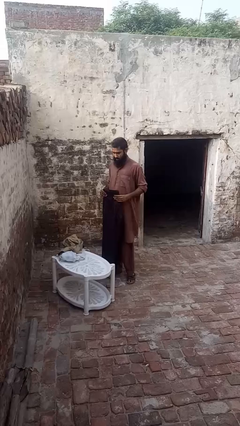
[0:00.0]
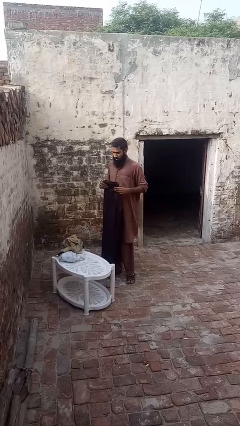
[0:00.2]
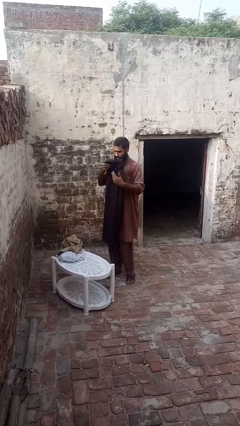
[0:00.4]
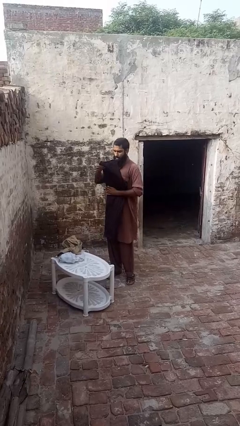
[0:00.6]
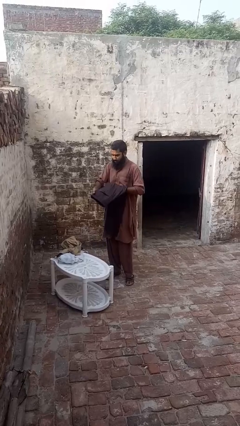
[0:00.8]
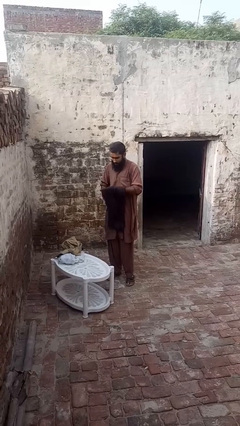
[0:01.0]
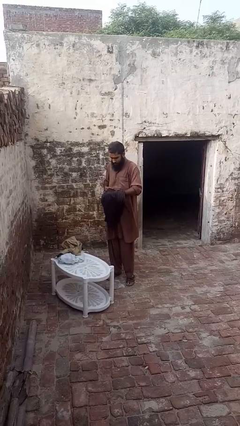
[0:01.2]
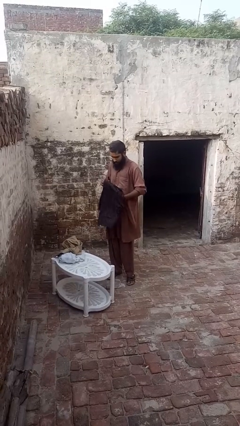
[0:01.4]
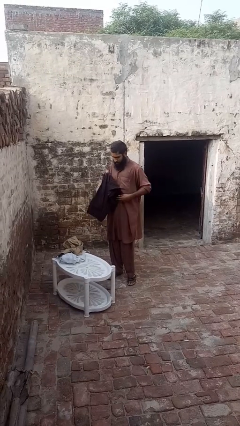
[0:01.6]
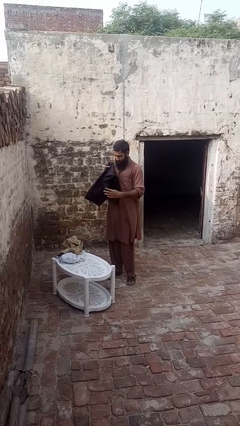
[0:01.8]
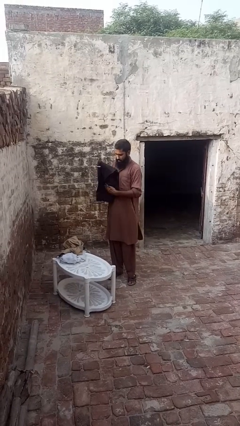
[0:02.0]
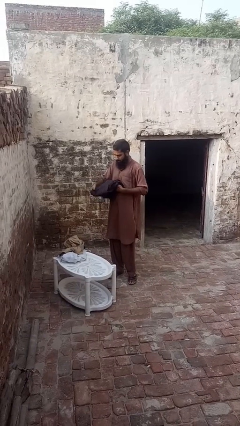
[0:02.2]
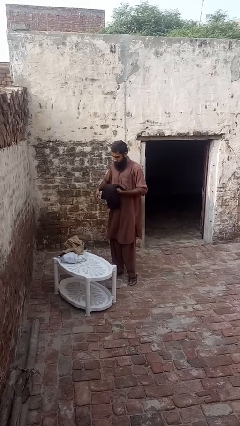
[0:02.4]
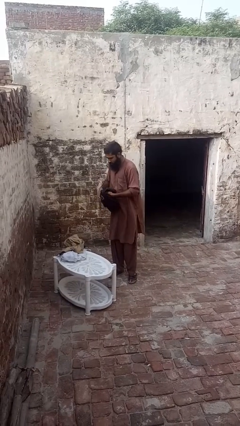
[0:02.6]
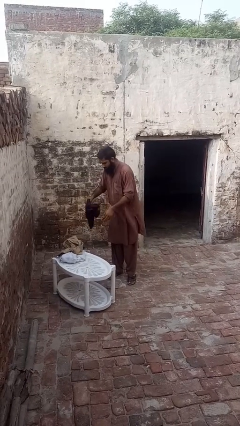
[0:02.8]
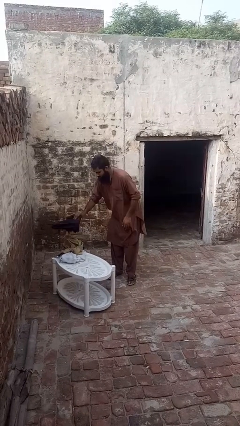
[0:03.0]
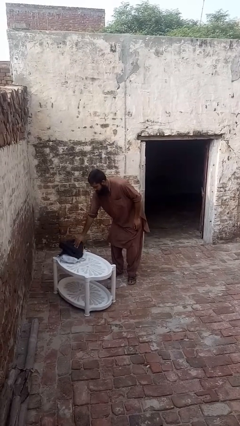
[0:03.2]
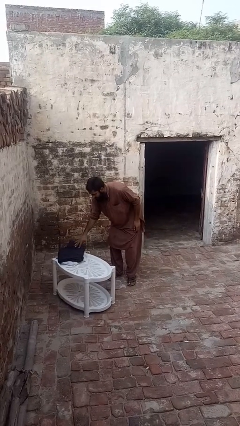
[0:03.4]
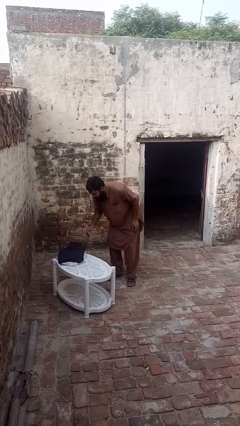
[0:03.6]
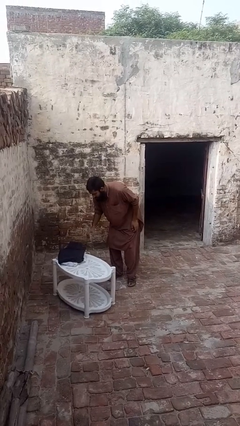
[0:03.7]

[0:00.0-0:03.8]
person folds pants

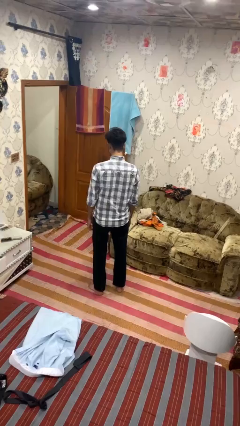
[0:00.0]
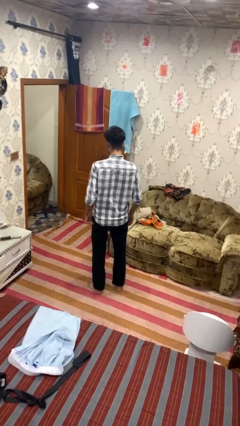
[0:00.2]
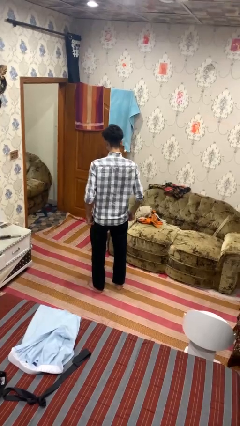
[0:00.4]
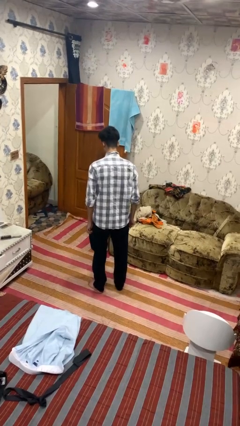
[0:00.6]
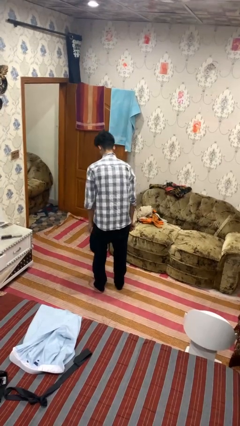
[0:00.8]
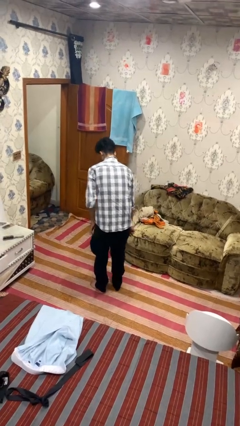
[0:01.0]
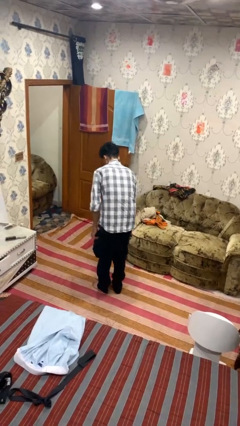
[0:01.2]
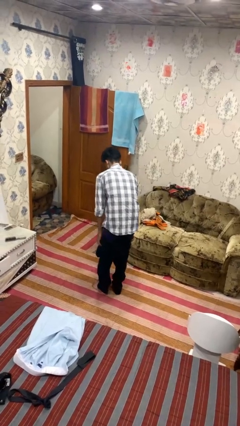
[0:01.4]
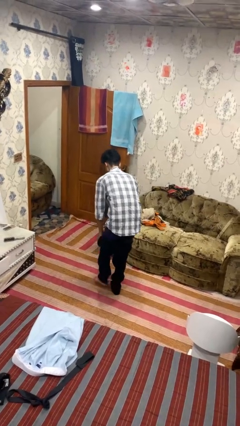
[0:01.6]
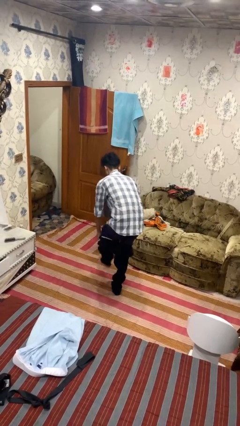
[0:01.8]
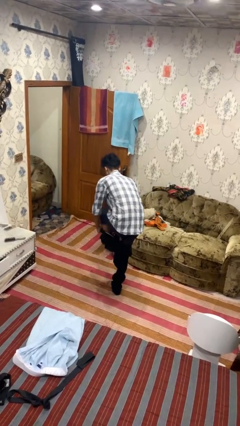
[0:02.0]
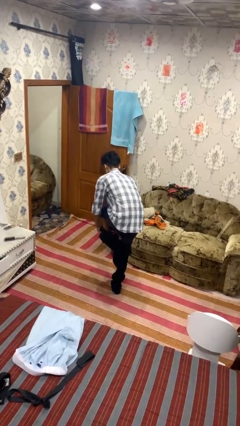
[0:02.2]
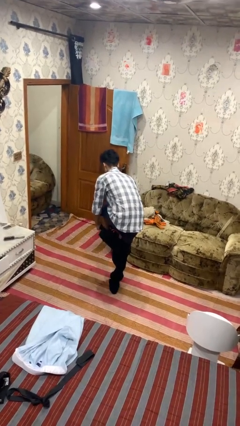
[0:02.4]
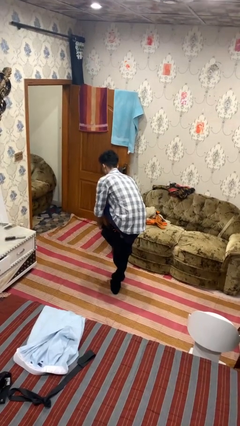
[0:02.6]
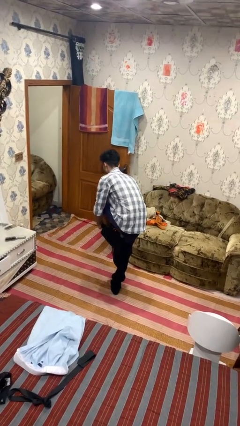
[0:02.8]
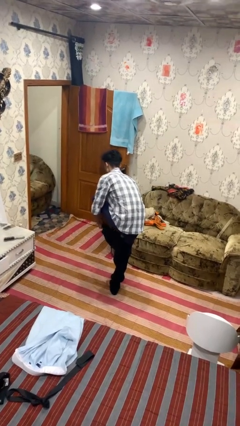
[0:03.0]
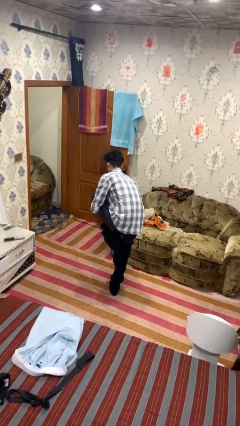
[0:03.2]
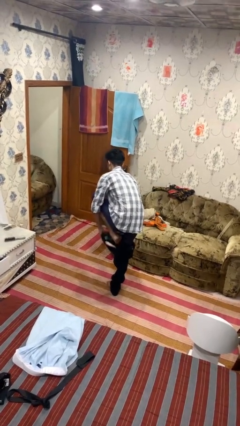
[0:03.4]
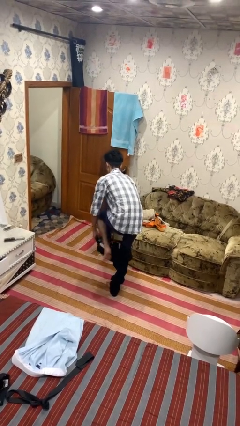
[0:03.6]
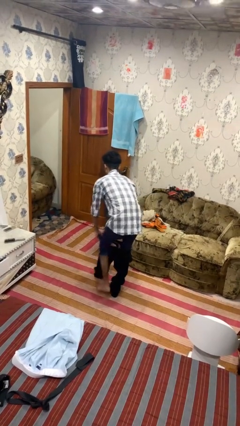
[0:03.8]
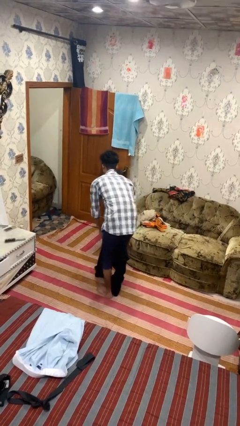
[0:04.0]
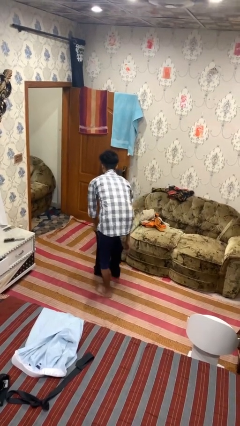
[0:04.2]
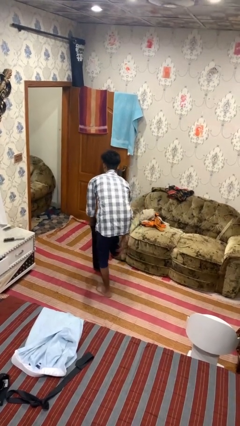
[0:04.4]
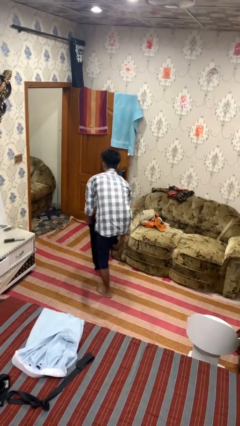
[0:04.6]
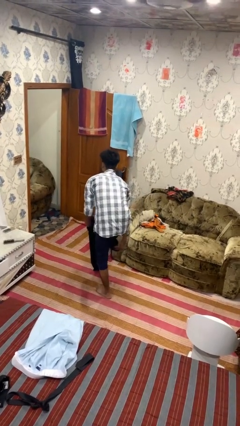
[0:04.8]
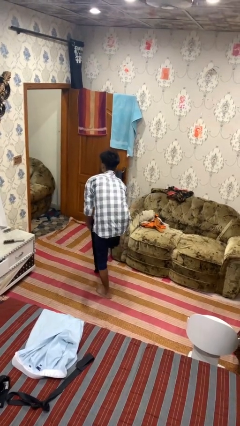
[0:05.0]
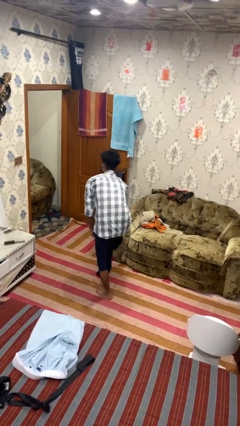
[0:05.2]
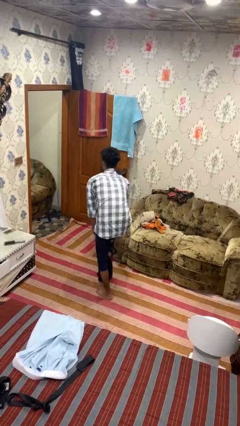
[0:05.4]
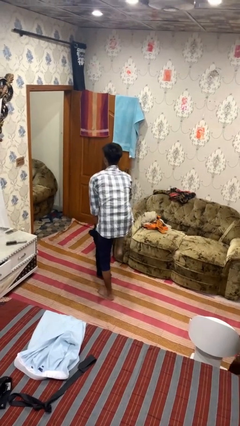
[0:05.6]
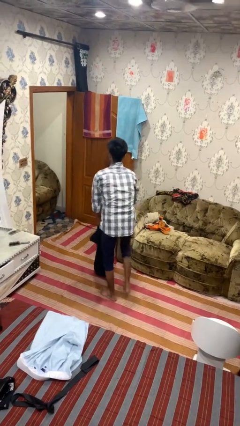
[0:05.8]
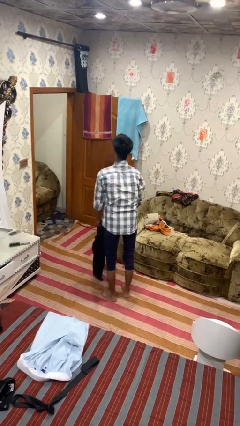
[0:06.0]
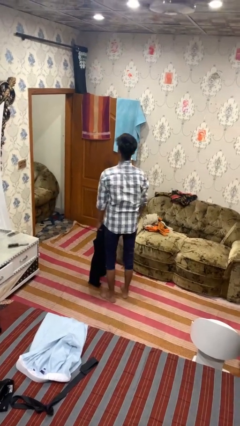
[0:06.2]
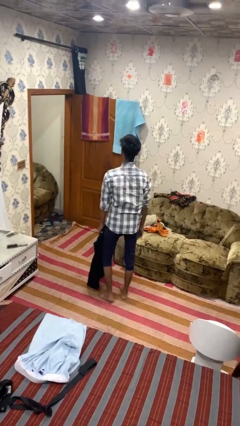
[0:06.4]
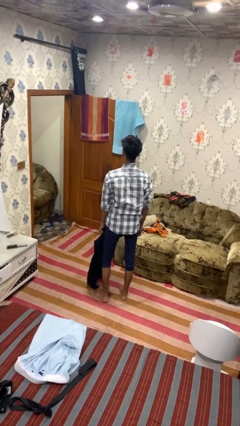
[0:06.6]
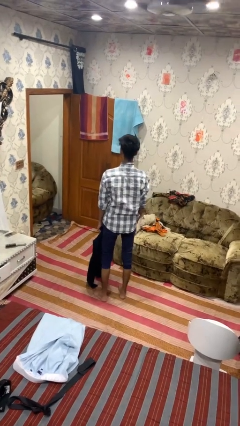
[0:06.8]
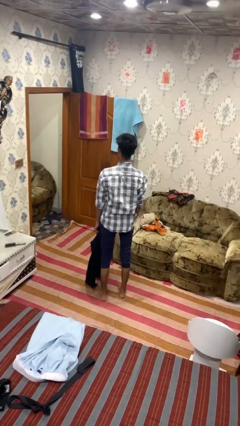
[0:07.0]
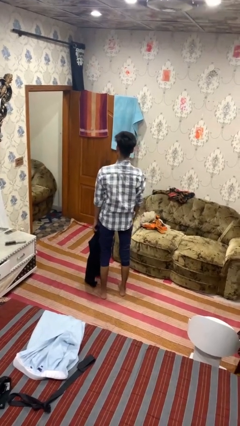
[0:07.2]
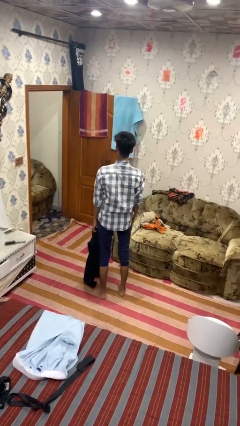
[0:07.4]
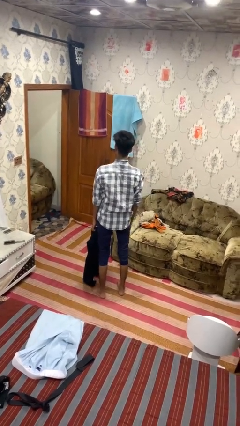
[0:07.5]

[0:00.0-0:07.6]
person takes off pants

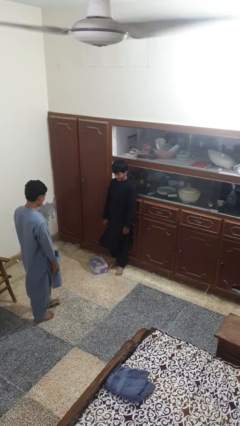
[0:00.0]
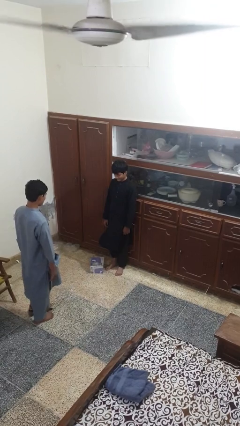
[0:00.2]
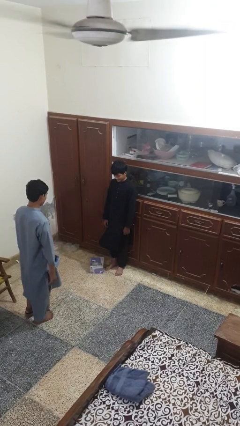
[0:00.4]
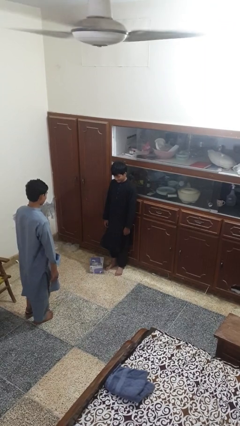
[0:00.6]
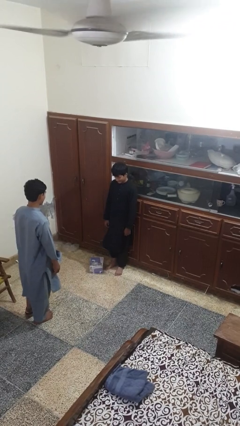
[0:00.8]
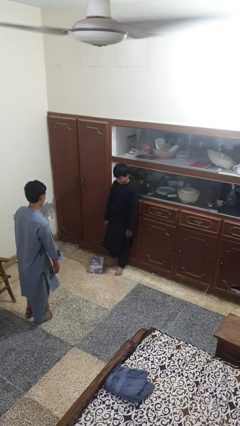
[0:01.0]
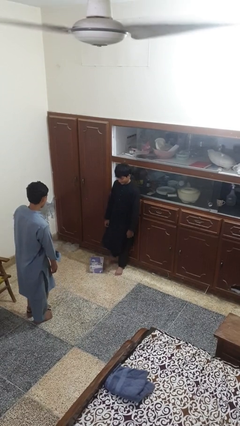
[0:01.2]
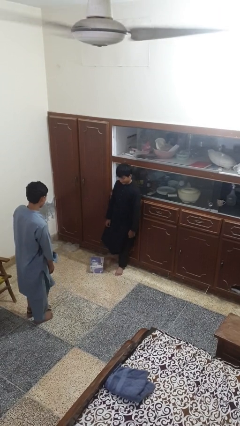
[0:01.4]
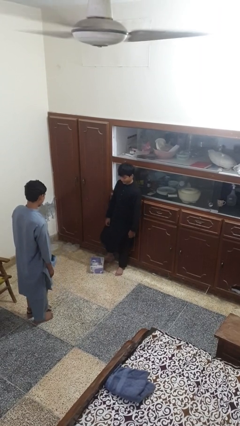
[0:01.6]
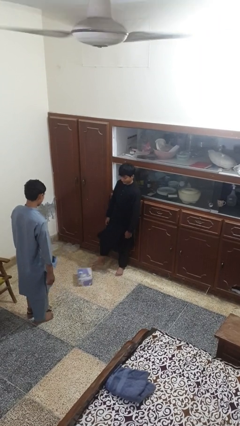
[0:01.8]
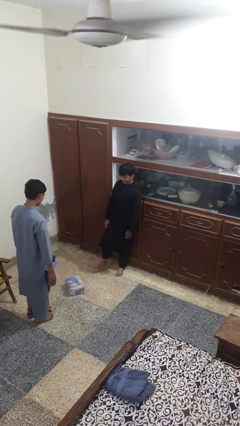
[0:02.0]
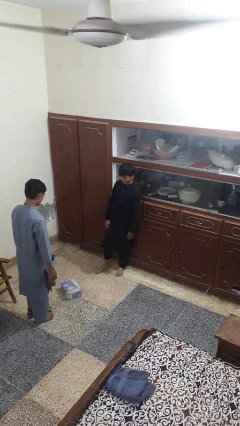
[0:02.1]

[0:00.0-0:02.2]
person kicks object to person

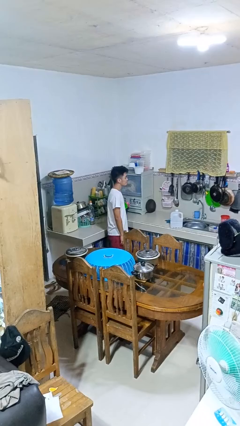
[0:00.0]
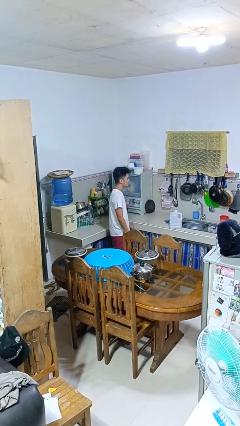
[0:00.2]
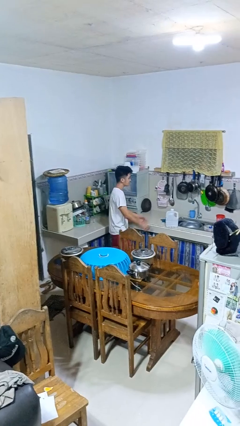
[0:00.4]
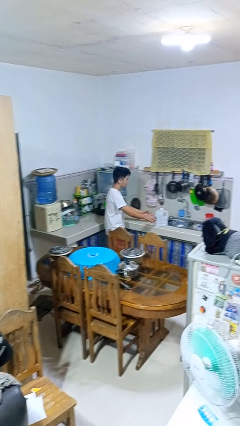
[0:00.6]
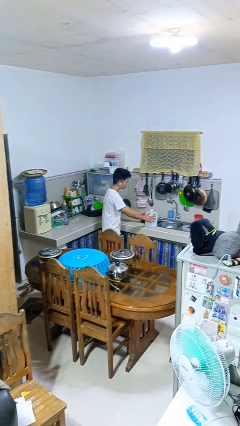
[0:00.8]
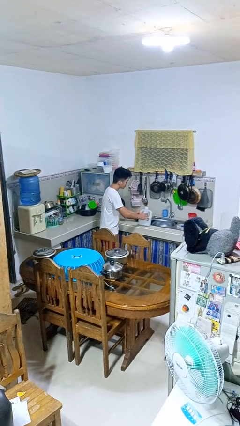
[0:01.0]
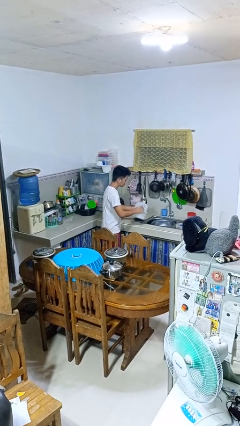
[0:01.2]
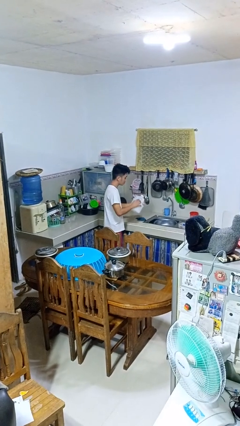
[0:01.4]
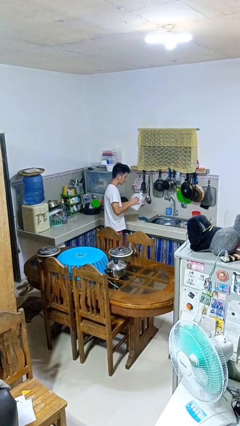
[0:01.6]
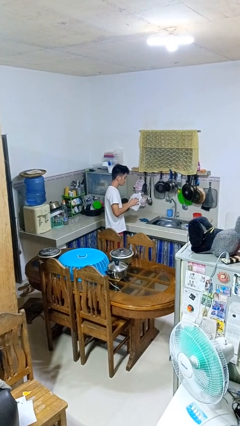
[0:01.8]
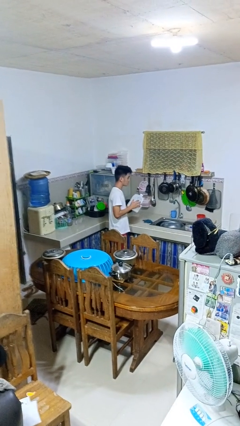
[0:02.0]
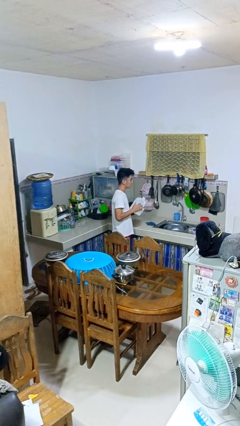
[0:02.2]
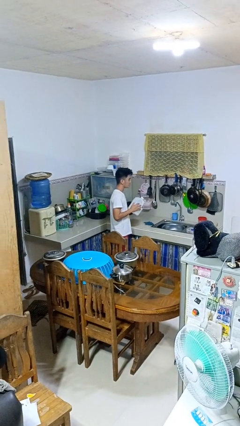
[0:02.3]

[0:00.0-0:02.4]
person picks up object from countertop

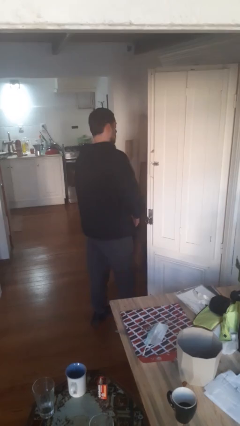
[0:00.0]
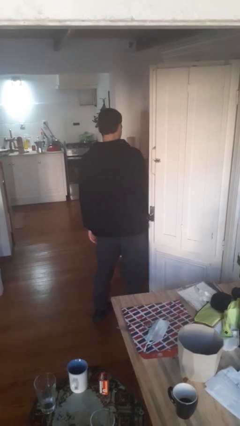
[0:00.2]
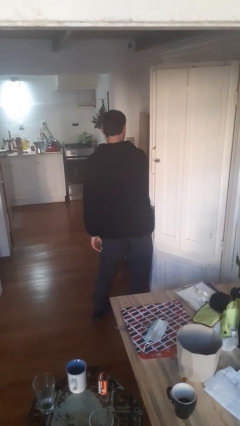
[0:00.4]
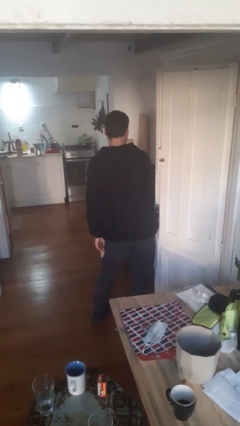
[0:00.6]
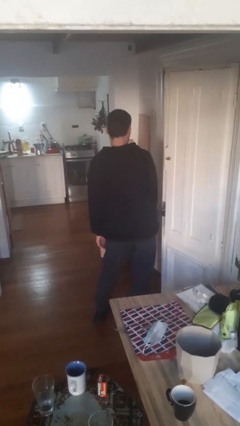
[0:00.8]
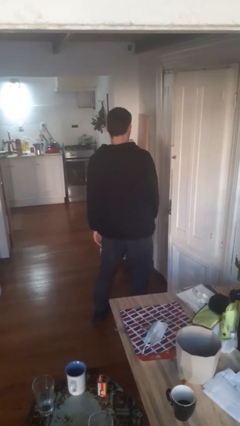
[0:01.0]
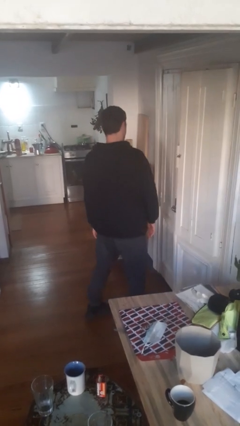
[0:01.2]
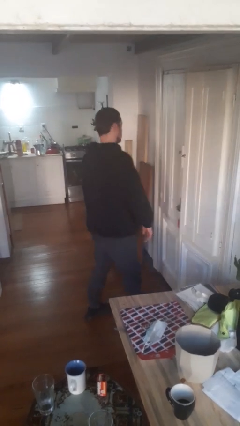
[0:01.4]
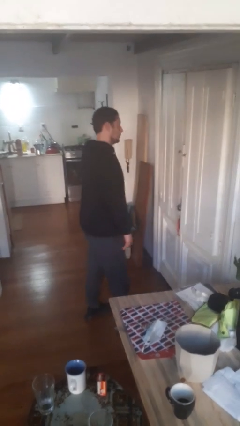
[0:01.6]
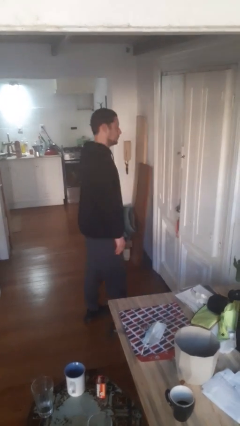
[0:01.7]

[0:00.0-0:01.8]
person closes door with hip
